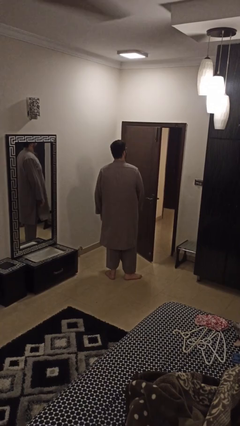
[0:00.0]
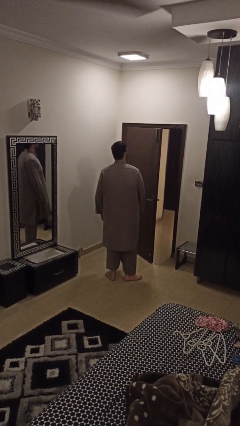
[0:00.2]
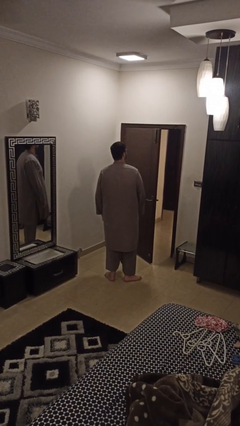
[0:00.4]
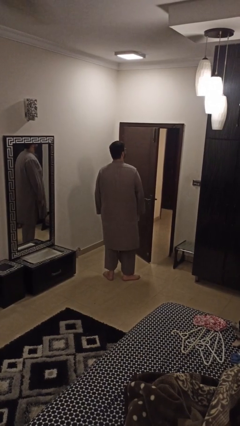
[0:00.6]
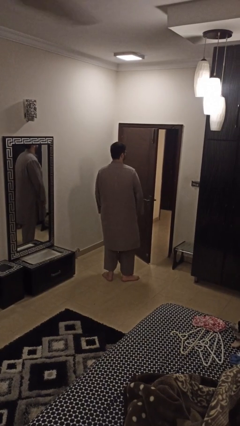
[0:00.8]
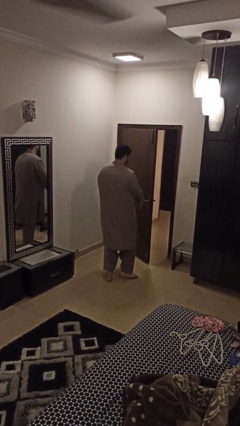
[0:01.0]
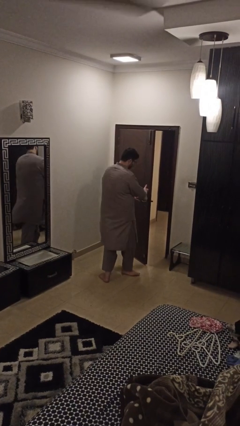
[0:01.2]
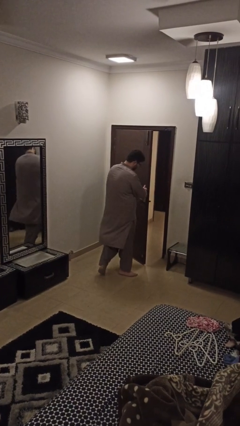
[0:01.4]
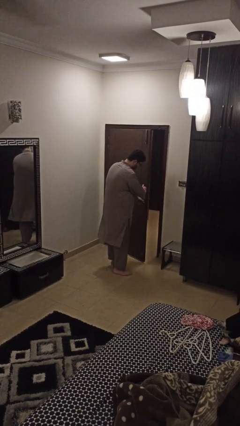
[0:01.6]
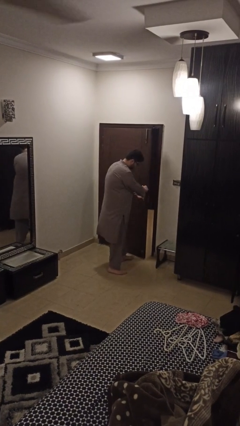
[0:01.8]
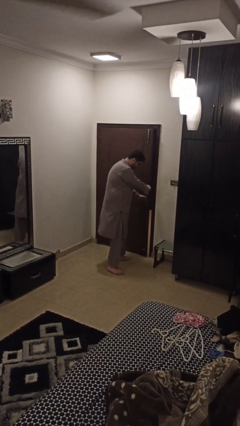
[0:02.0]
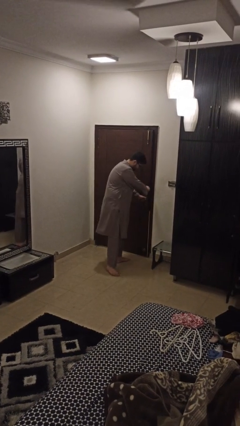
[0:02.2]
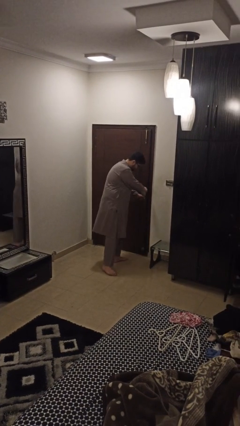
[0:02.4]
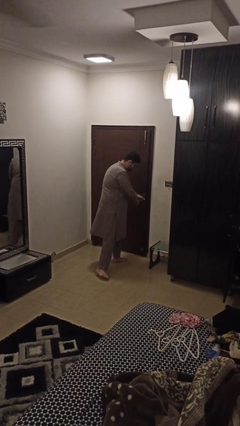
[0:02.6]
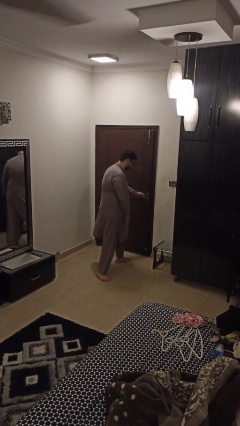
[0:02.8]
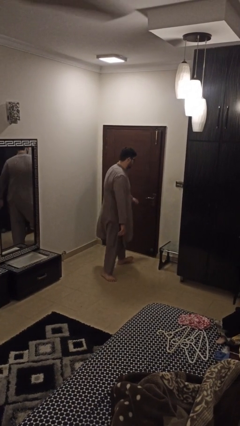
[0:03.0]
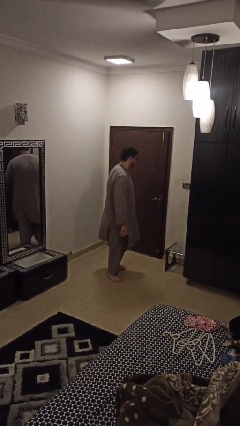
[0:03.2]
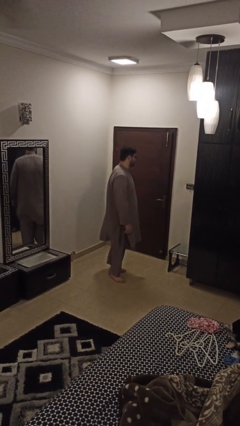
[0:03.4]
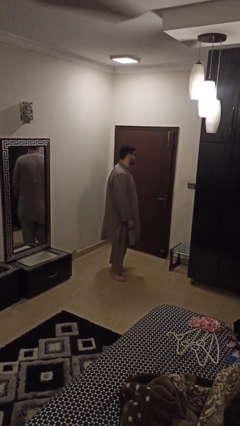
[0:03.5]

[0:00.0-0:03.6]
person closes facility door

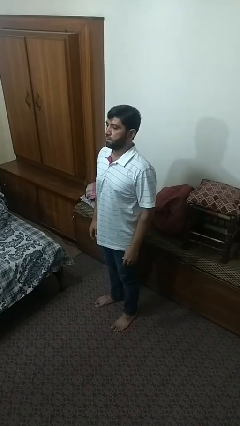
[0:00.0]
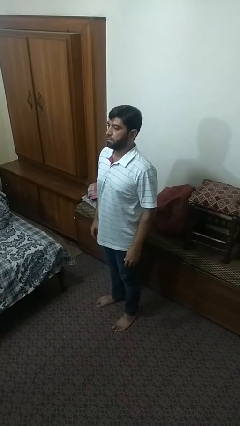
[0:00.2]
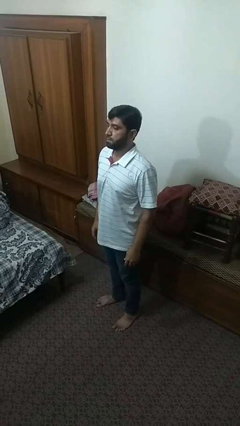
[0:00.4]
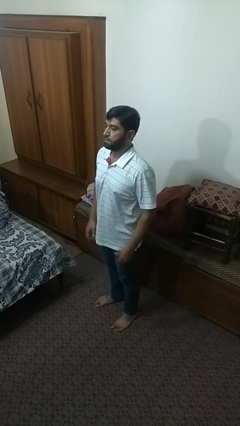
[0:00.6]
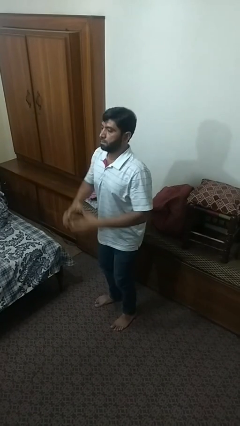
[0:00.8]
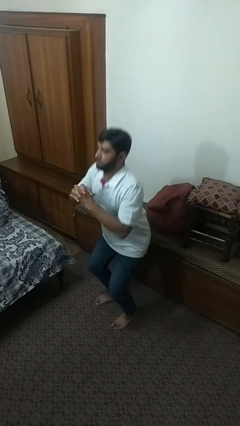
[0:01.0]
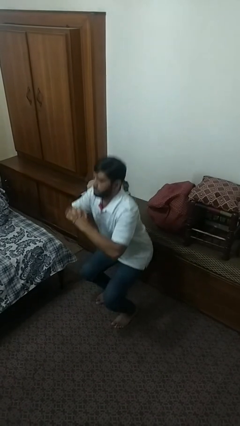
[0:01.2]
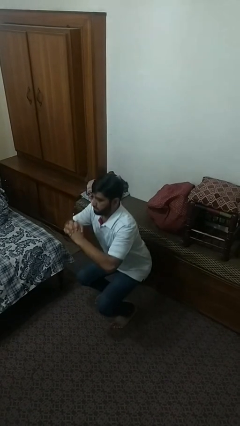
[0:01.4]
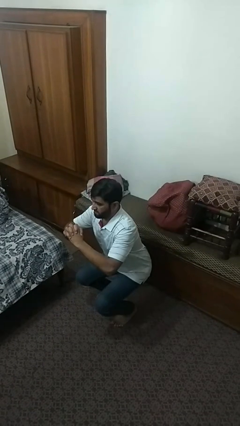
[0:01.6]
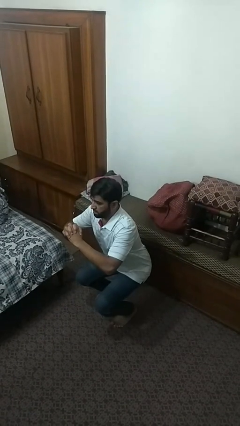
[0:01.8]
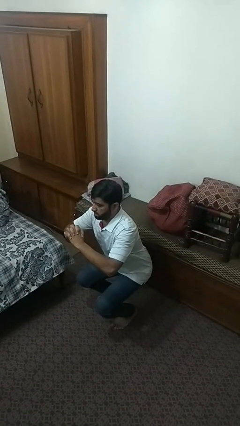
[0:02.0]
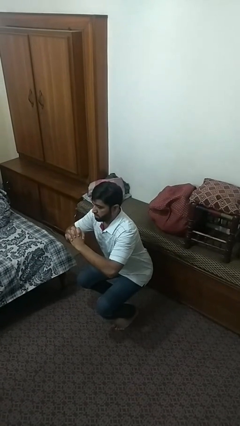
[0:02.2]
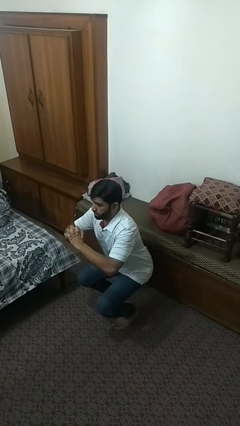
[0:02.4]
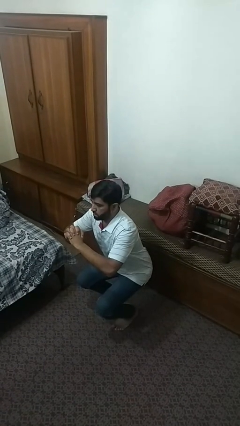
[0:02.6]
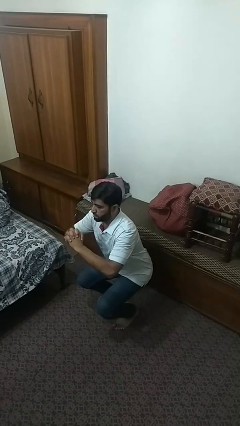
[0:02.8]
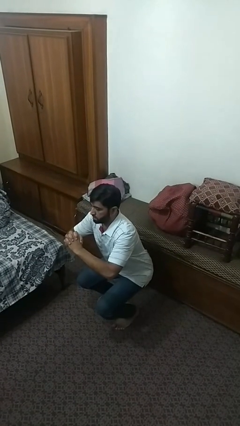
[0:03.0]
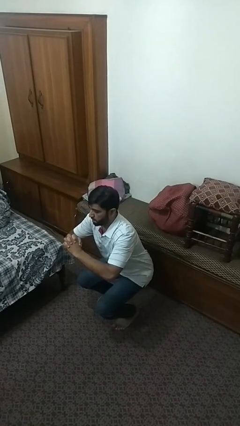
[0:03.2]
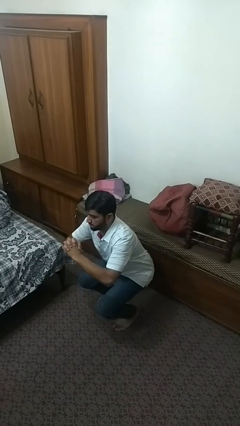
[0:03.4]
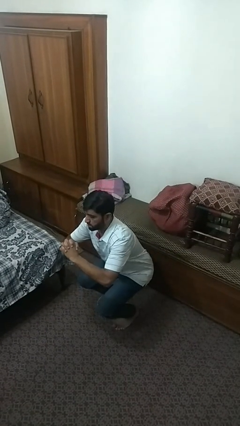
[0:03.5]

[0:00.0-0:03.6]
person squats

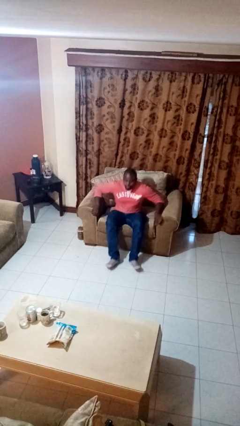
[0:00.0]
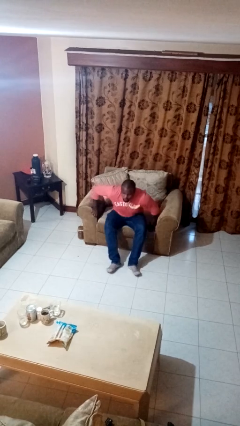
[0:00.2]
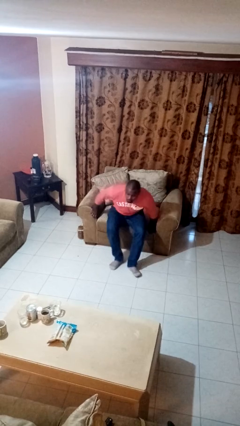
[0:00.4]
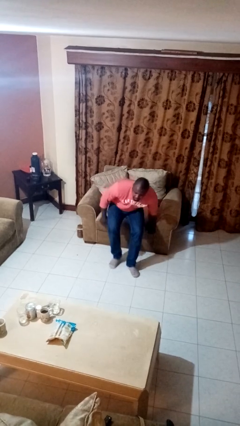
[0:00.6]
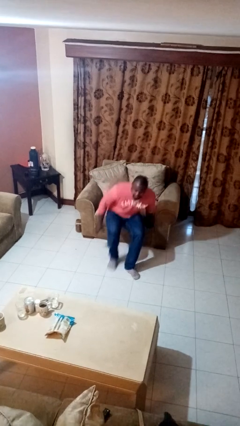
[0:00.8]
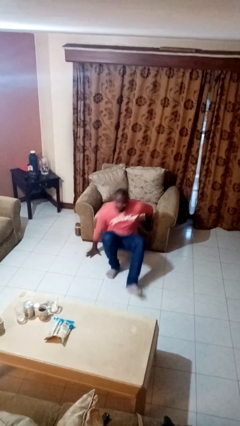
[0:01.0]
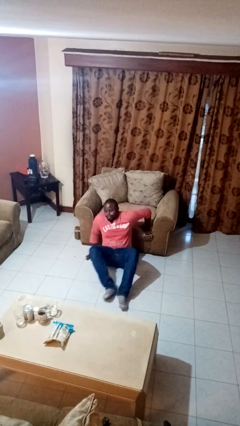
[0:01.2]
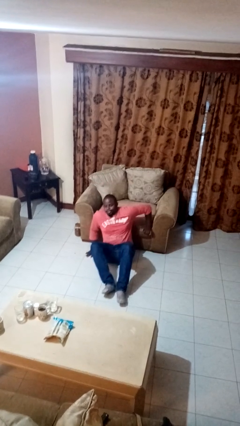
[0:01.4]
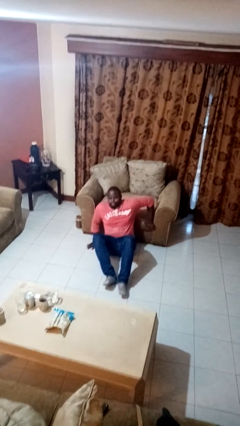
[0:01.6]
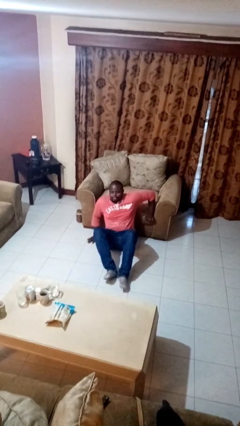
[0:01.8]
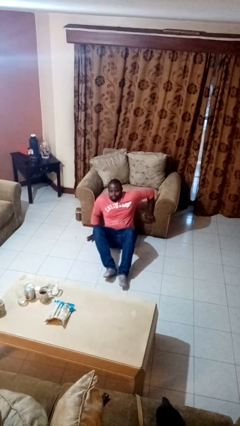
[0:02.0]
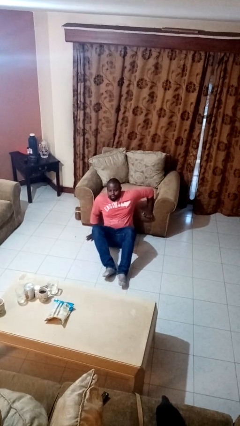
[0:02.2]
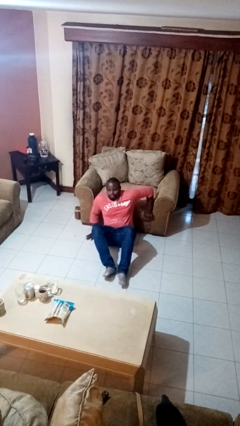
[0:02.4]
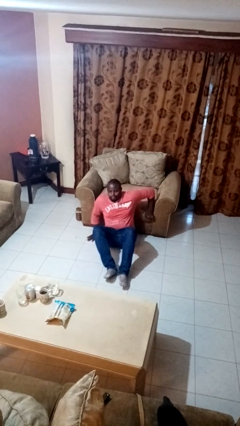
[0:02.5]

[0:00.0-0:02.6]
person falls from chair

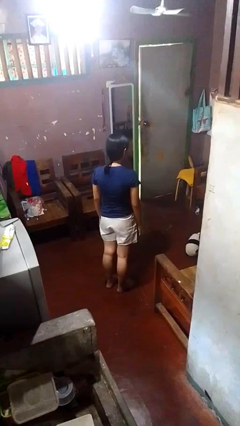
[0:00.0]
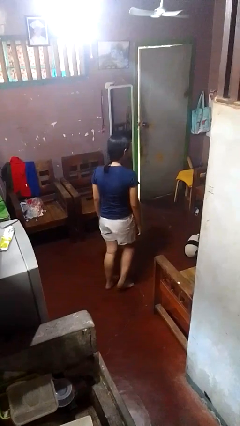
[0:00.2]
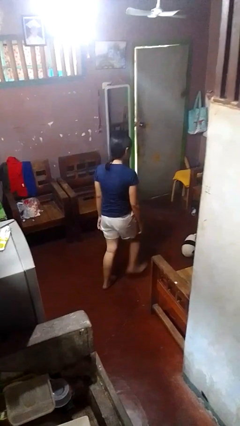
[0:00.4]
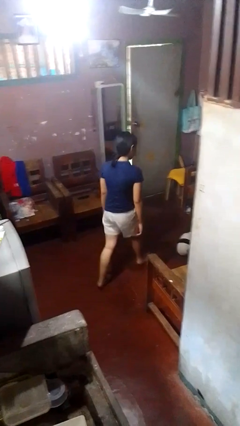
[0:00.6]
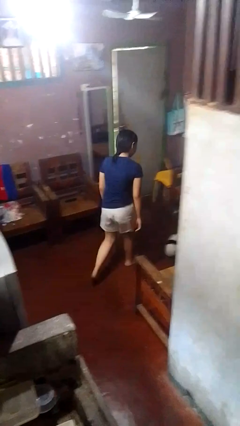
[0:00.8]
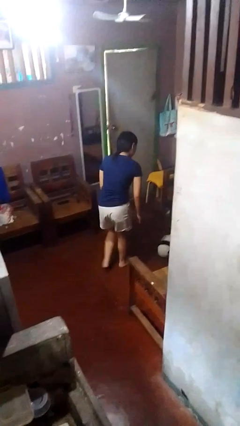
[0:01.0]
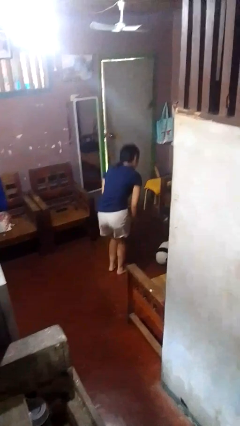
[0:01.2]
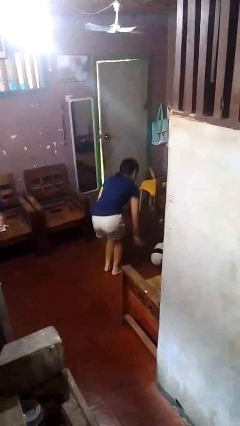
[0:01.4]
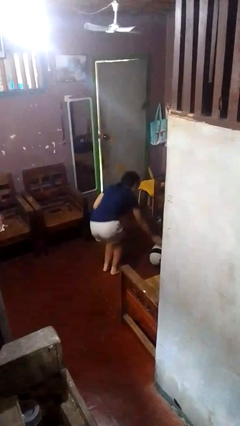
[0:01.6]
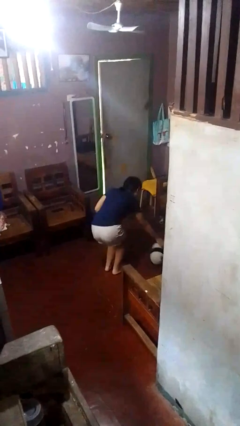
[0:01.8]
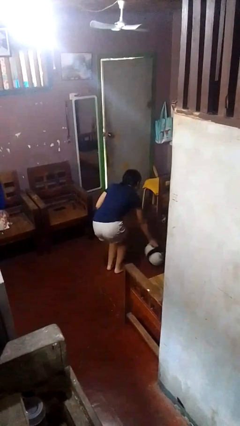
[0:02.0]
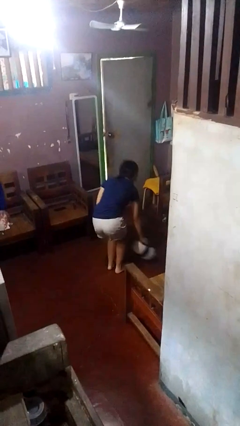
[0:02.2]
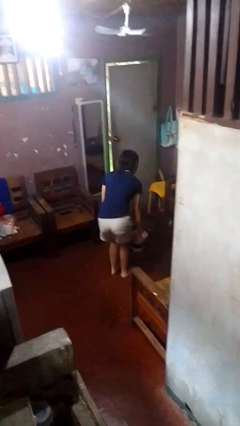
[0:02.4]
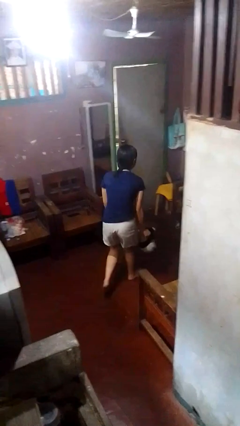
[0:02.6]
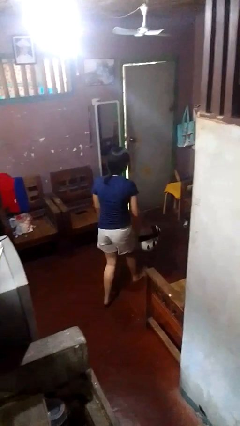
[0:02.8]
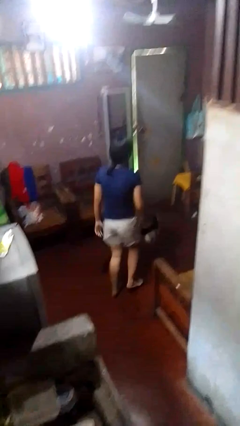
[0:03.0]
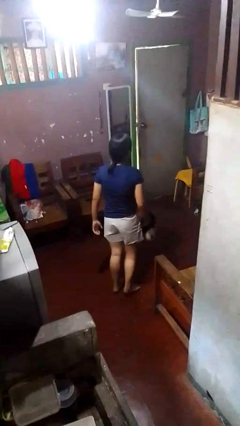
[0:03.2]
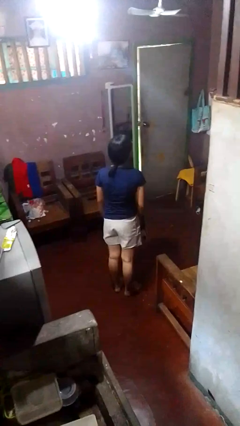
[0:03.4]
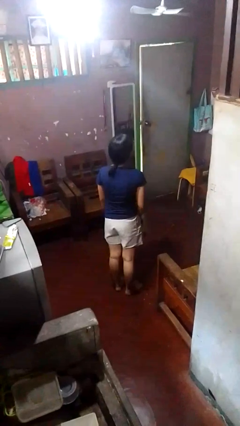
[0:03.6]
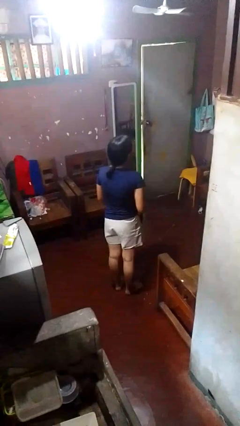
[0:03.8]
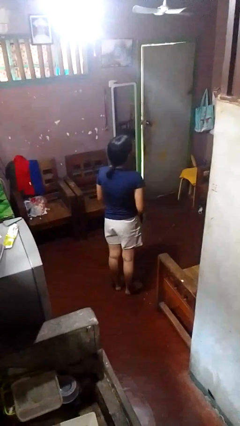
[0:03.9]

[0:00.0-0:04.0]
person picks up object from floor

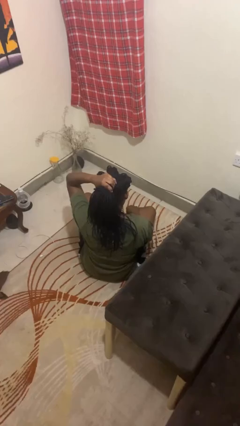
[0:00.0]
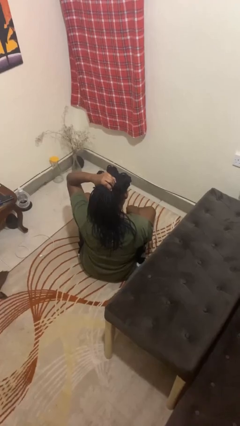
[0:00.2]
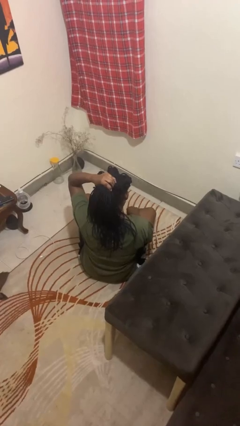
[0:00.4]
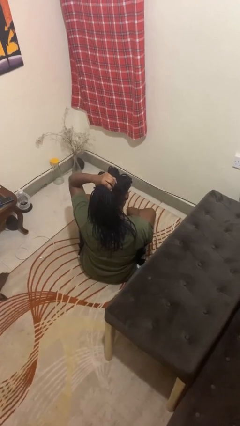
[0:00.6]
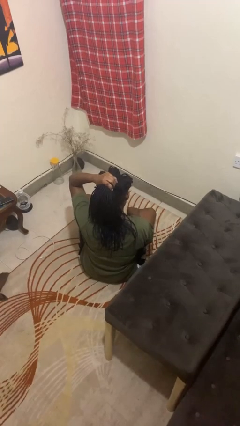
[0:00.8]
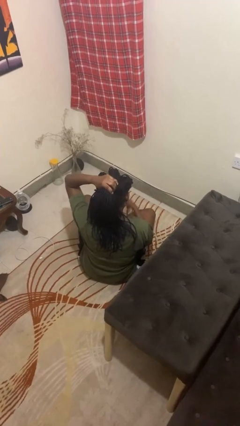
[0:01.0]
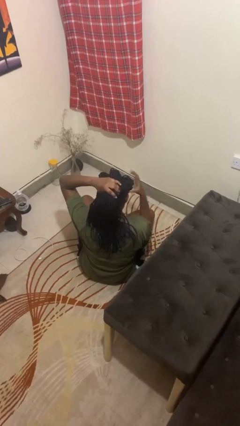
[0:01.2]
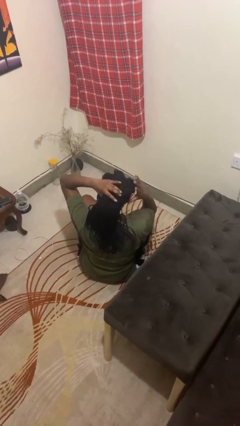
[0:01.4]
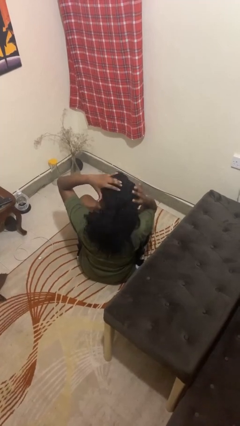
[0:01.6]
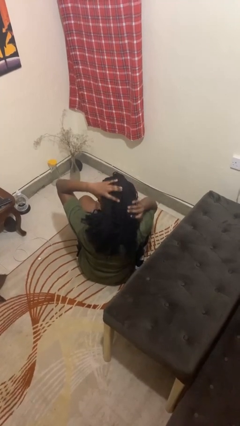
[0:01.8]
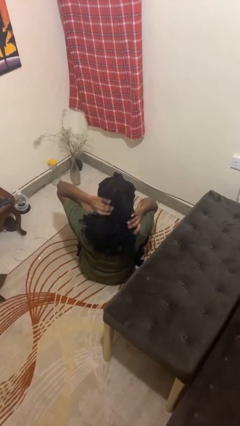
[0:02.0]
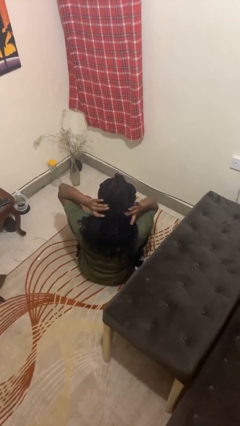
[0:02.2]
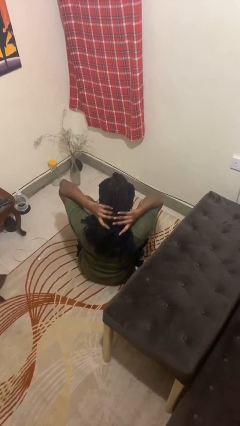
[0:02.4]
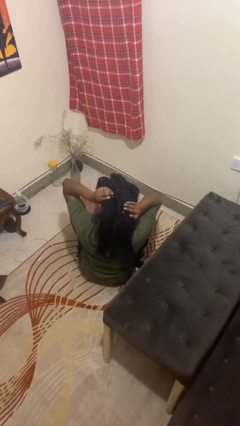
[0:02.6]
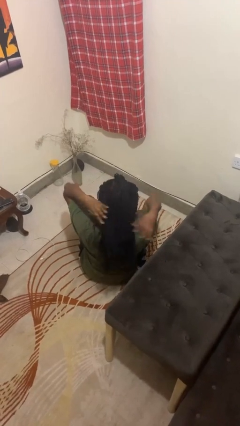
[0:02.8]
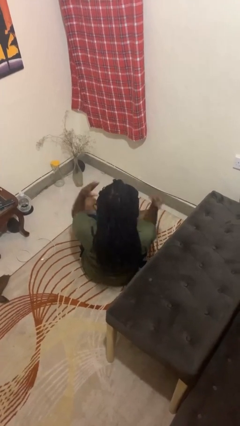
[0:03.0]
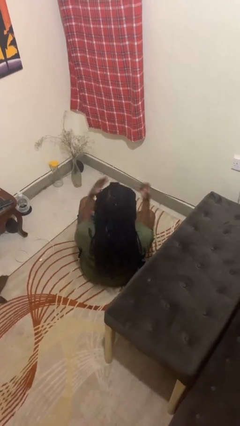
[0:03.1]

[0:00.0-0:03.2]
person takes off hairtie

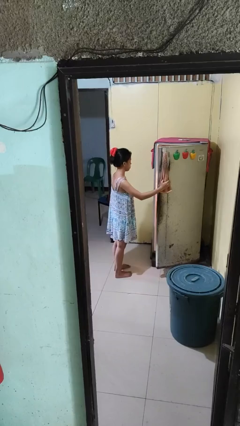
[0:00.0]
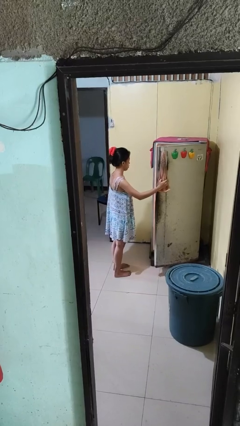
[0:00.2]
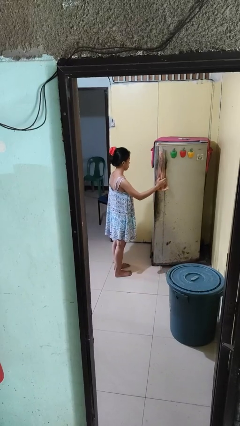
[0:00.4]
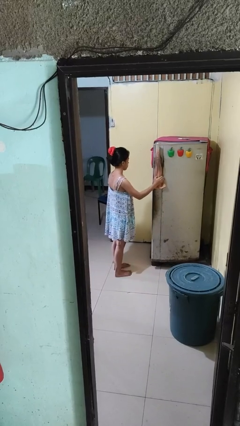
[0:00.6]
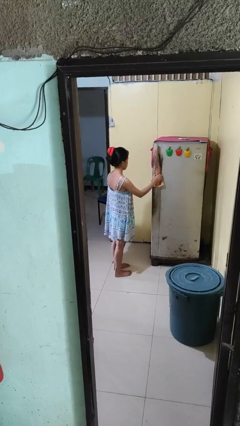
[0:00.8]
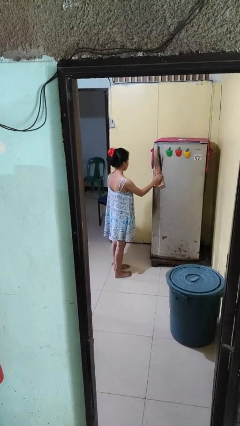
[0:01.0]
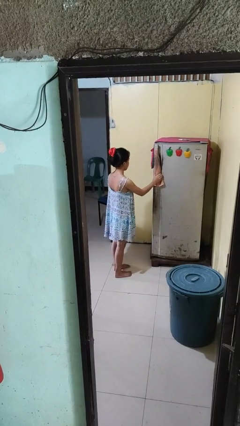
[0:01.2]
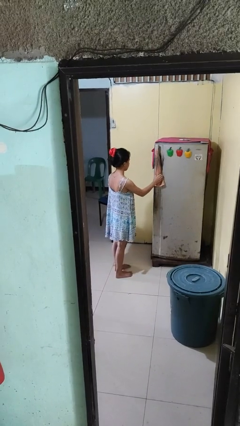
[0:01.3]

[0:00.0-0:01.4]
person closes refrigerator
